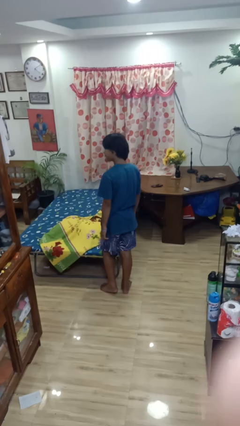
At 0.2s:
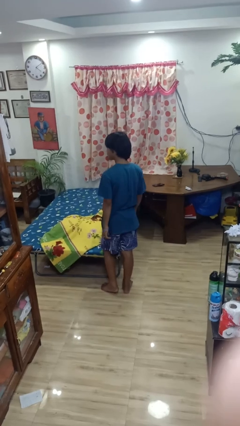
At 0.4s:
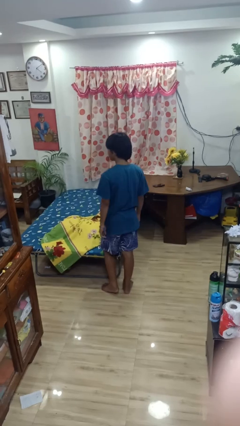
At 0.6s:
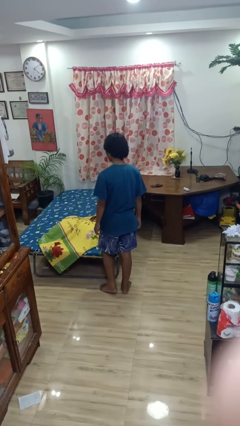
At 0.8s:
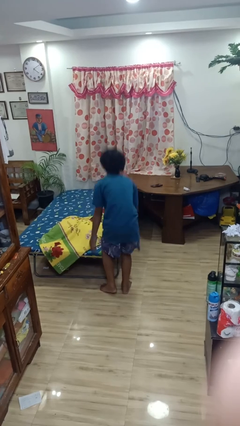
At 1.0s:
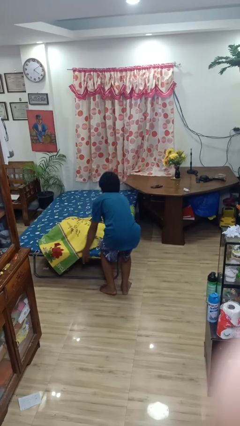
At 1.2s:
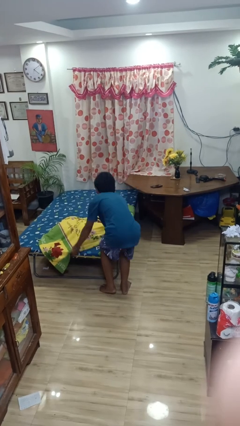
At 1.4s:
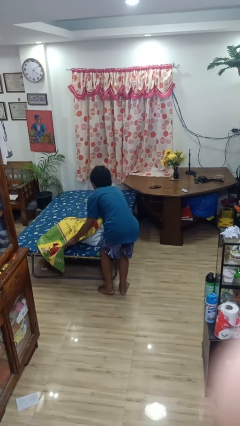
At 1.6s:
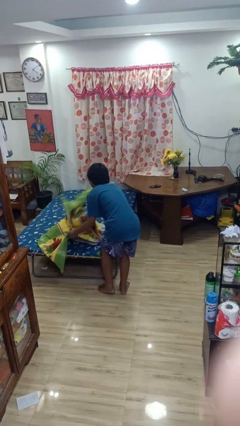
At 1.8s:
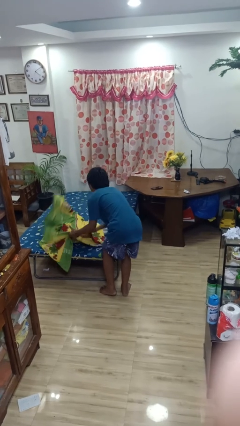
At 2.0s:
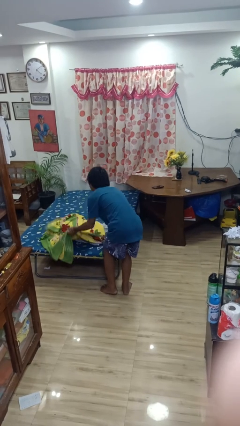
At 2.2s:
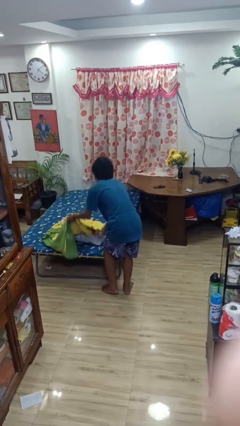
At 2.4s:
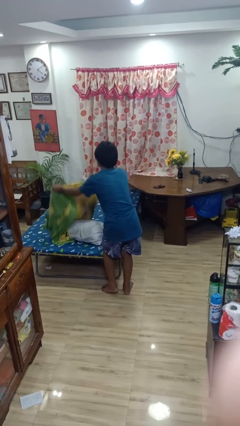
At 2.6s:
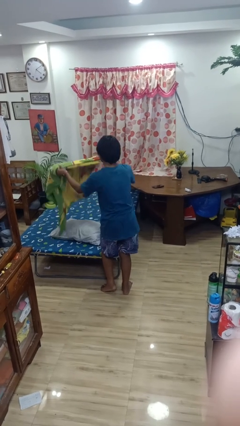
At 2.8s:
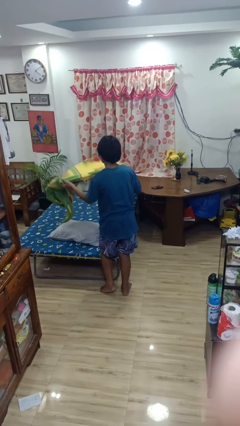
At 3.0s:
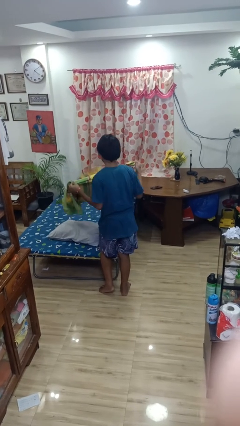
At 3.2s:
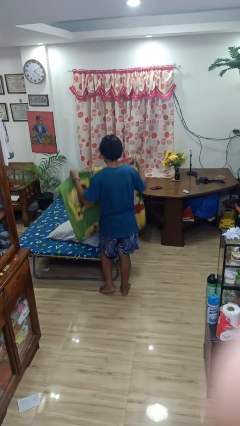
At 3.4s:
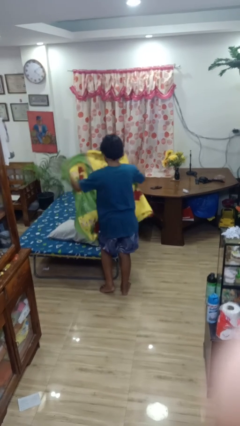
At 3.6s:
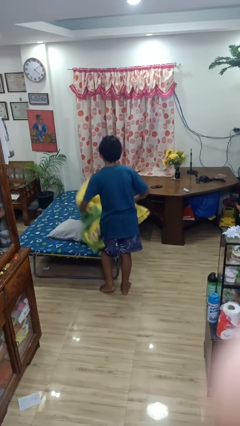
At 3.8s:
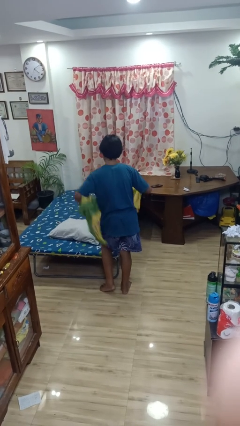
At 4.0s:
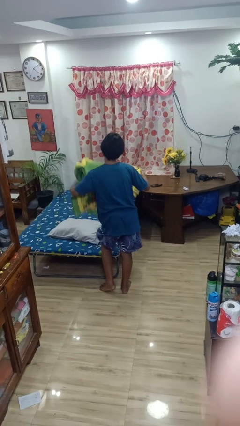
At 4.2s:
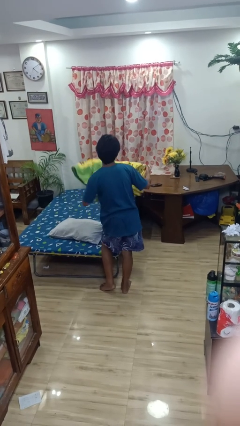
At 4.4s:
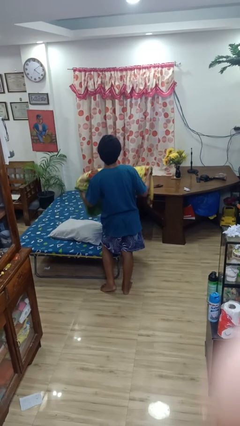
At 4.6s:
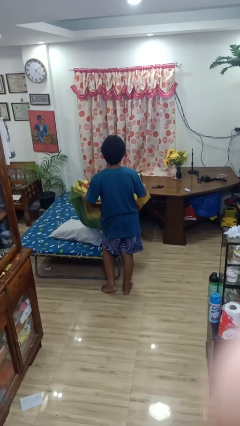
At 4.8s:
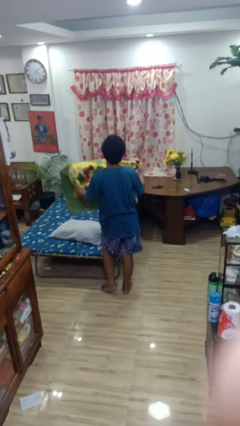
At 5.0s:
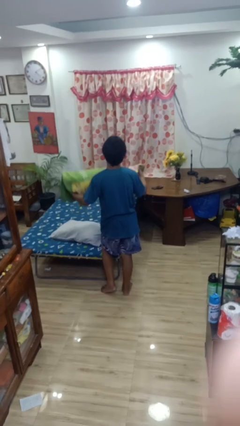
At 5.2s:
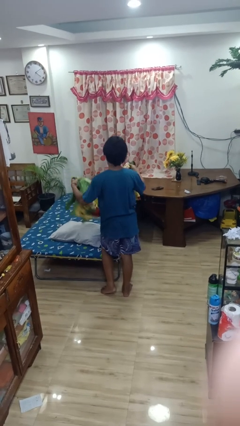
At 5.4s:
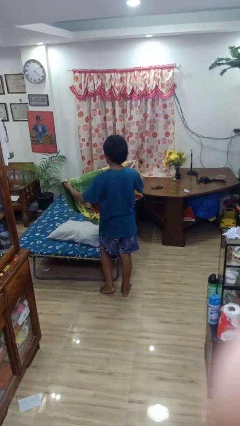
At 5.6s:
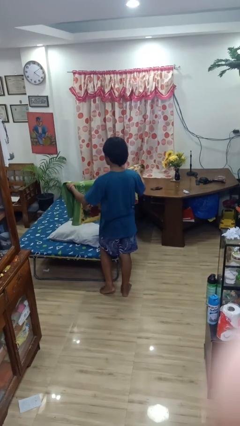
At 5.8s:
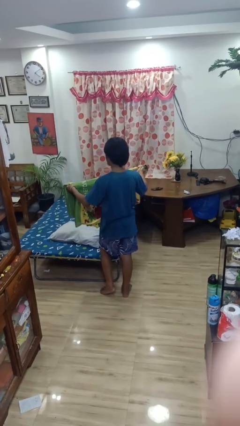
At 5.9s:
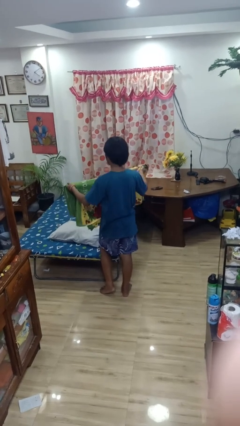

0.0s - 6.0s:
person folds blanket

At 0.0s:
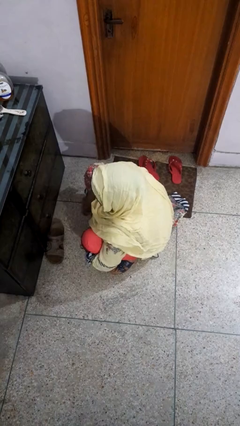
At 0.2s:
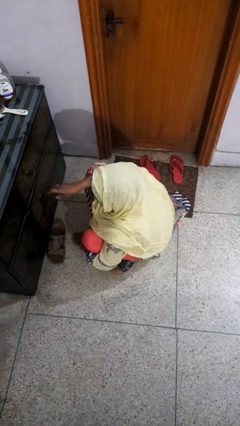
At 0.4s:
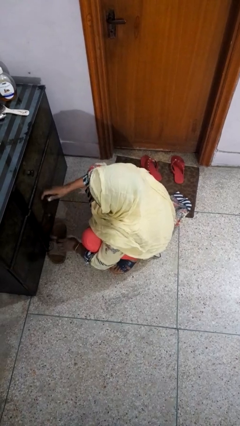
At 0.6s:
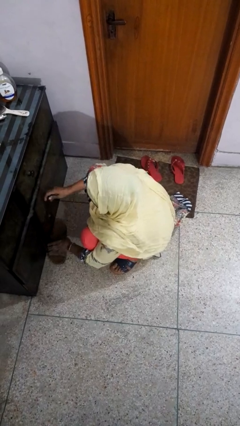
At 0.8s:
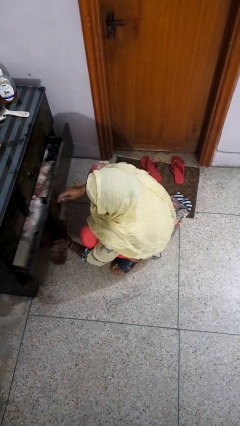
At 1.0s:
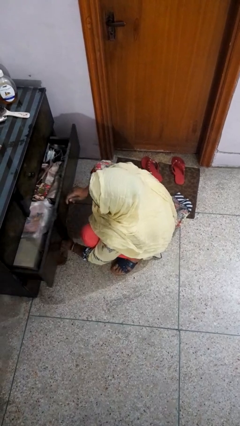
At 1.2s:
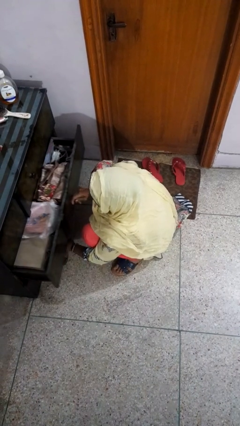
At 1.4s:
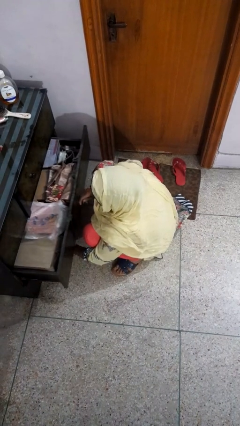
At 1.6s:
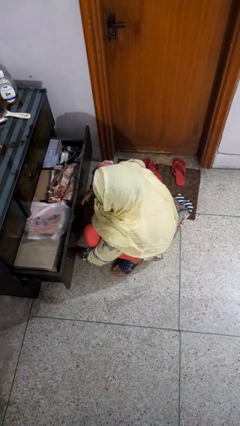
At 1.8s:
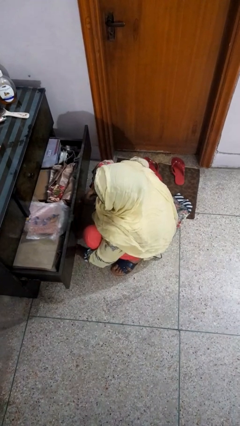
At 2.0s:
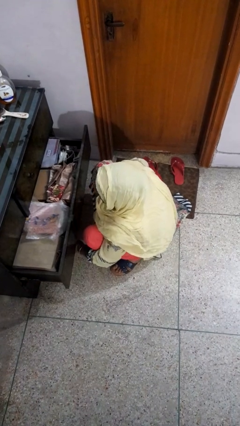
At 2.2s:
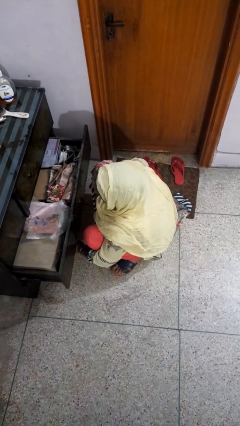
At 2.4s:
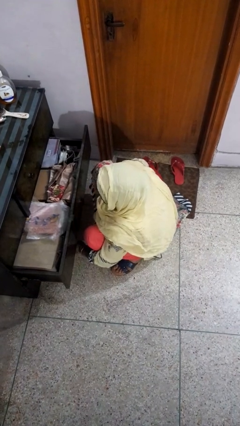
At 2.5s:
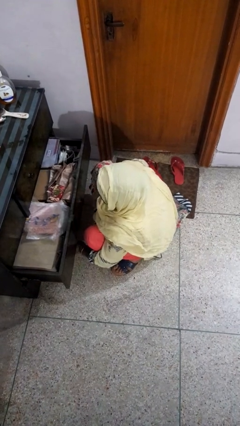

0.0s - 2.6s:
person opens dresser drawer

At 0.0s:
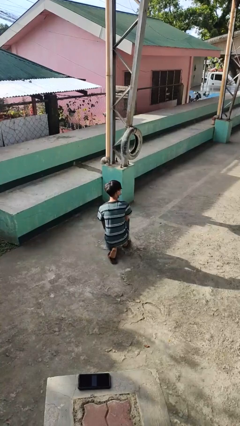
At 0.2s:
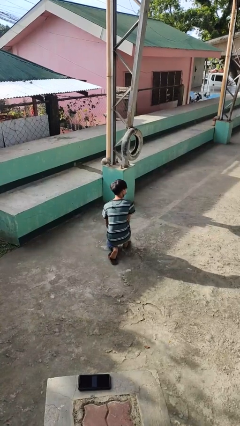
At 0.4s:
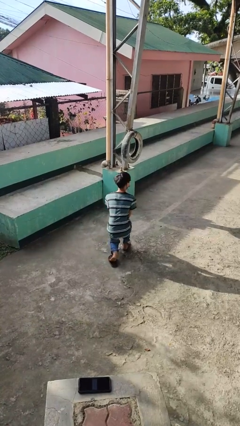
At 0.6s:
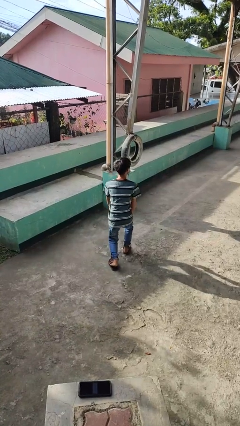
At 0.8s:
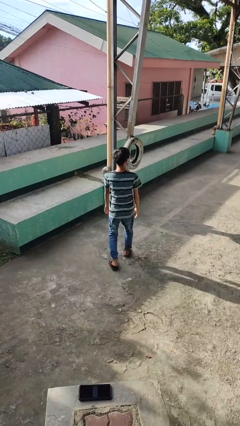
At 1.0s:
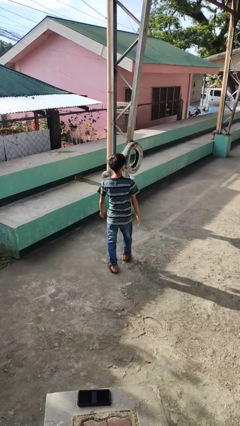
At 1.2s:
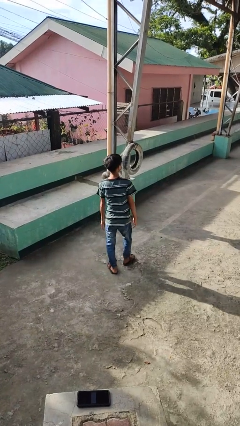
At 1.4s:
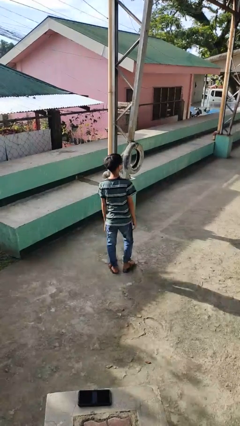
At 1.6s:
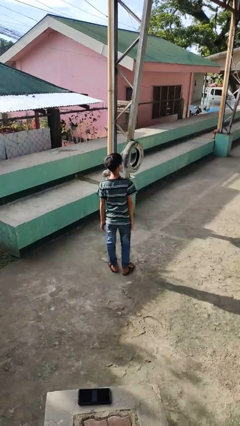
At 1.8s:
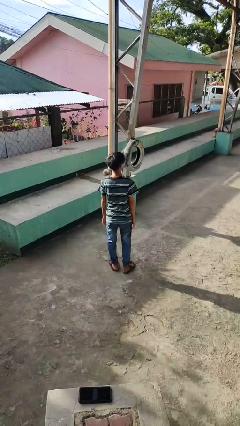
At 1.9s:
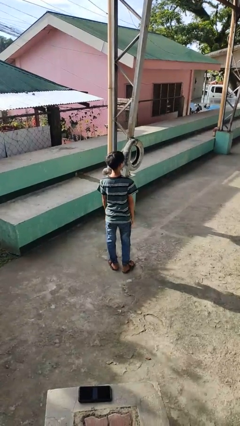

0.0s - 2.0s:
person stands up from floor

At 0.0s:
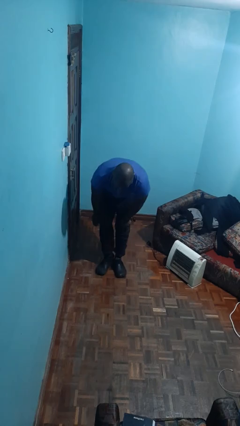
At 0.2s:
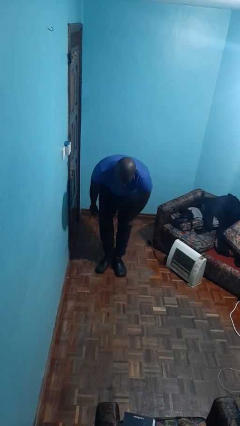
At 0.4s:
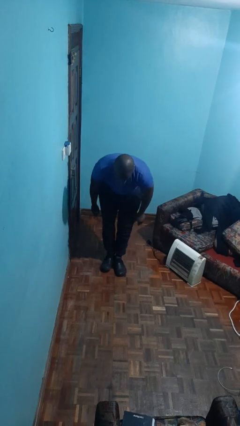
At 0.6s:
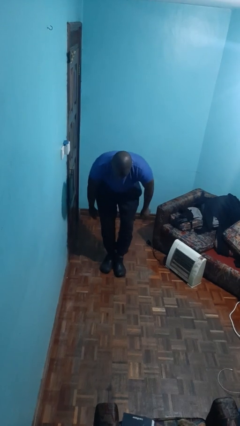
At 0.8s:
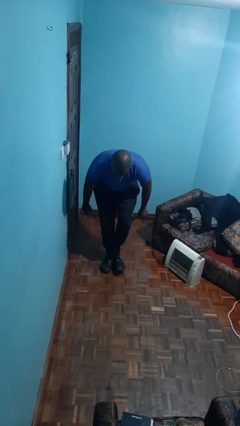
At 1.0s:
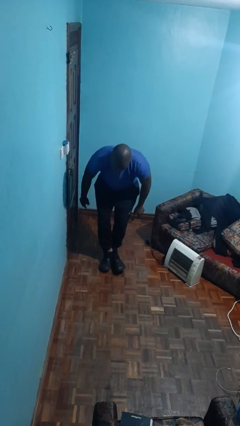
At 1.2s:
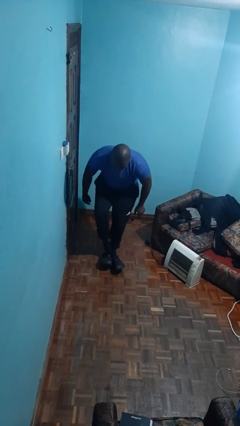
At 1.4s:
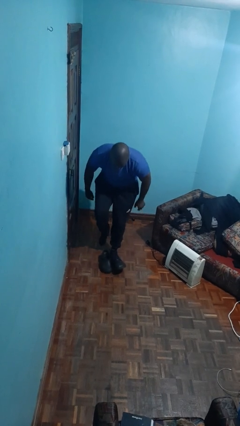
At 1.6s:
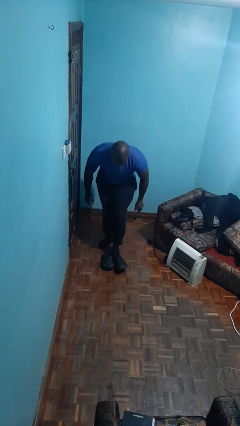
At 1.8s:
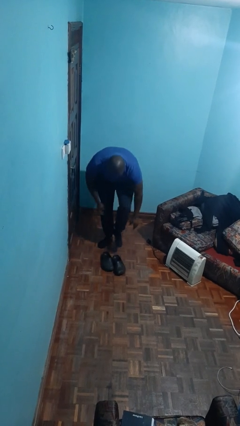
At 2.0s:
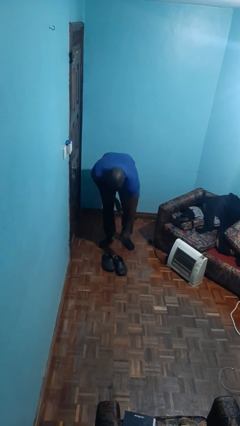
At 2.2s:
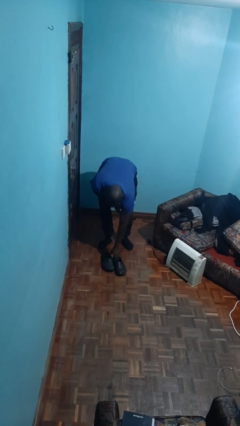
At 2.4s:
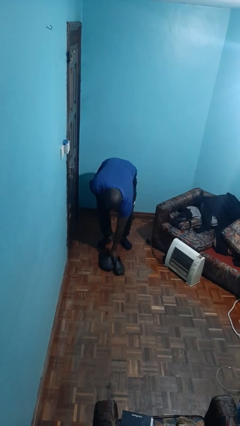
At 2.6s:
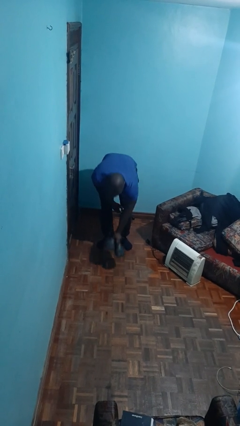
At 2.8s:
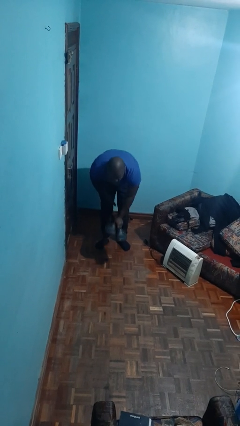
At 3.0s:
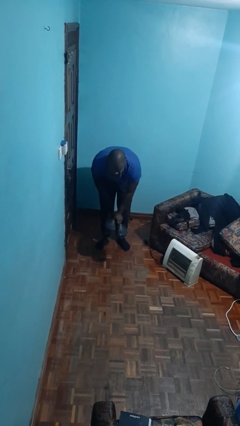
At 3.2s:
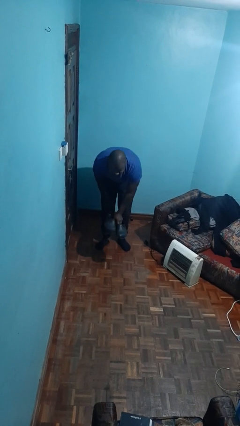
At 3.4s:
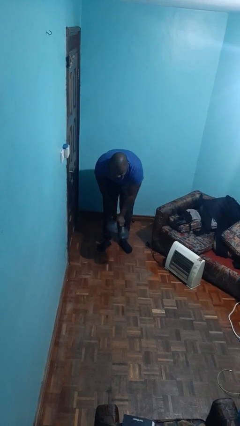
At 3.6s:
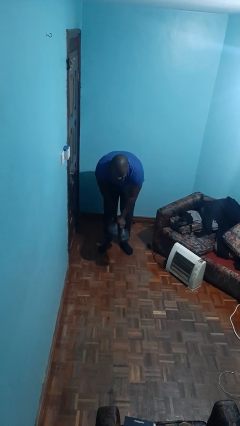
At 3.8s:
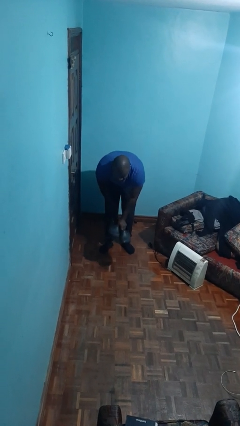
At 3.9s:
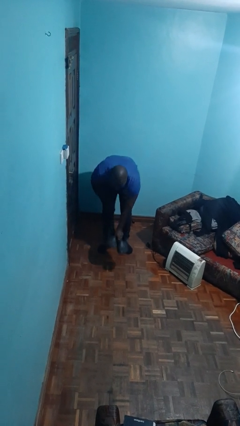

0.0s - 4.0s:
person takes off shoes

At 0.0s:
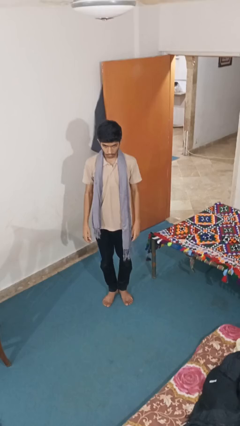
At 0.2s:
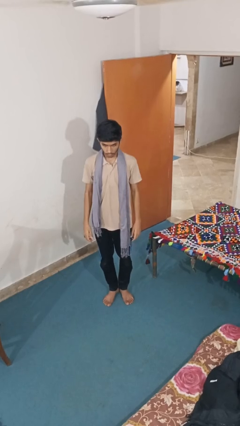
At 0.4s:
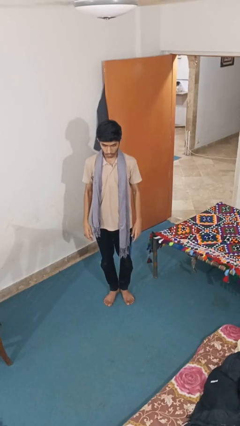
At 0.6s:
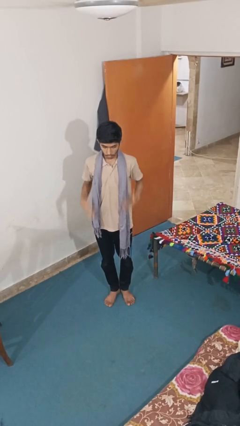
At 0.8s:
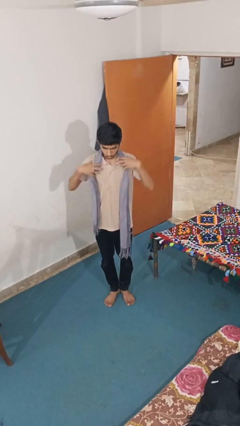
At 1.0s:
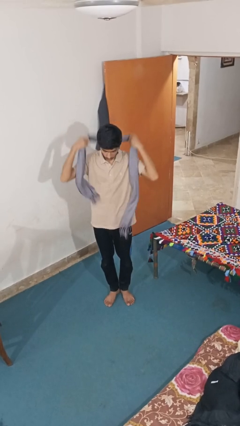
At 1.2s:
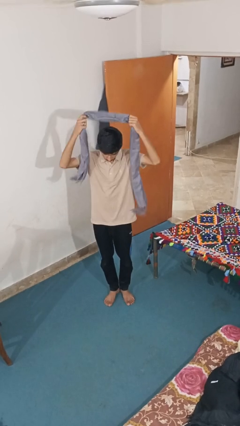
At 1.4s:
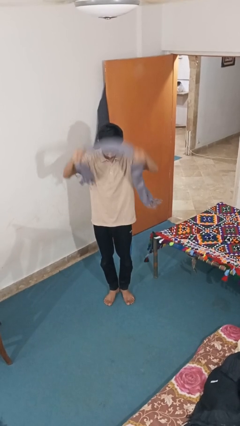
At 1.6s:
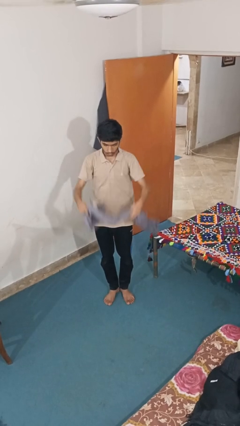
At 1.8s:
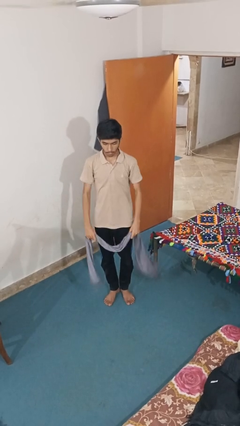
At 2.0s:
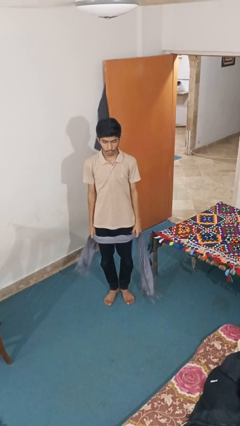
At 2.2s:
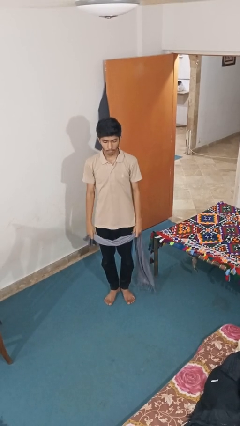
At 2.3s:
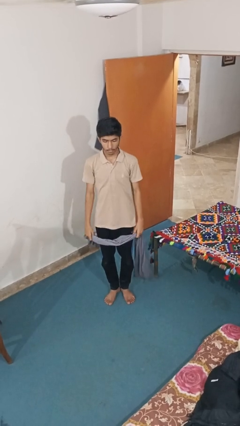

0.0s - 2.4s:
person takes off scarf

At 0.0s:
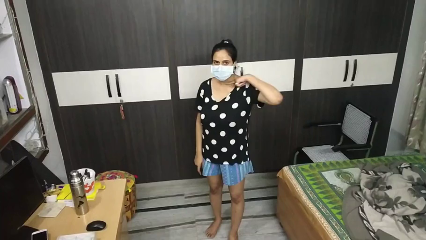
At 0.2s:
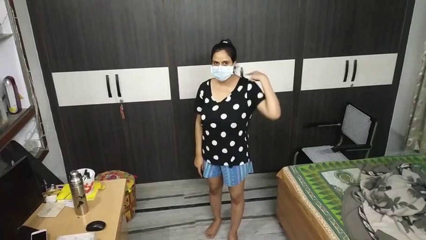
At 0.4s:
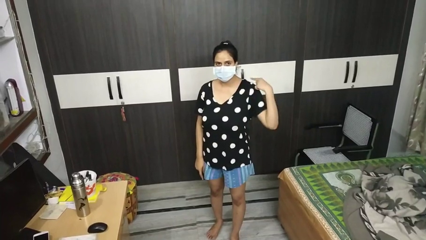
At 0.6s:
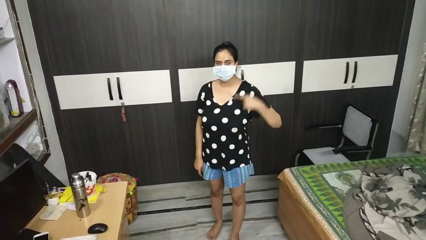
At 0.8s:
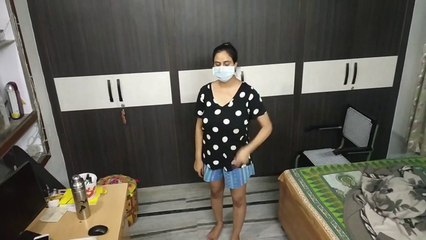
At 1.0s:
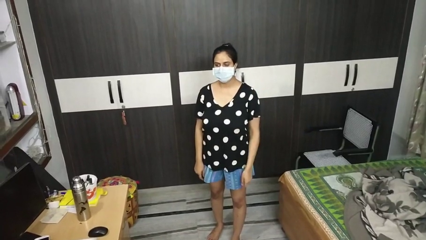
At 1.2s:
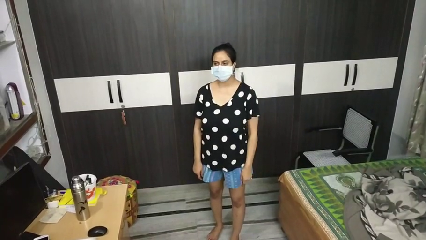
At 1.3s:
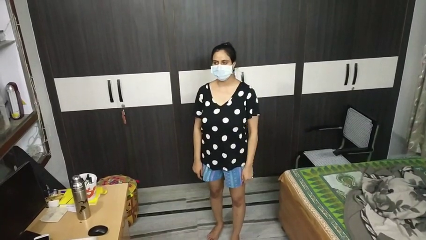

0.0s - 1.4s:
person gestures cut
